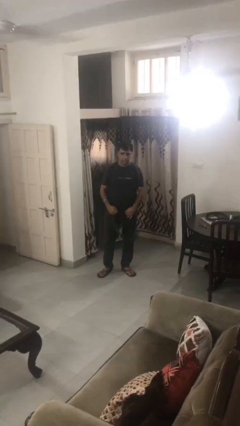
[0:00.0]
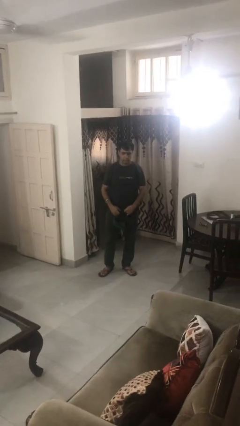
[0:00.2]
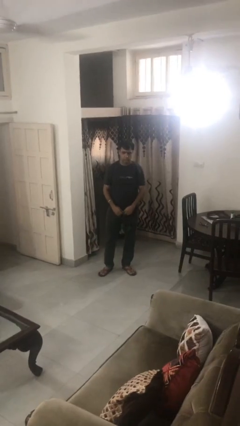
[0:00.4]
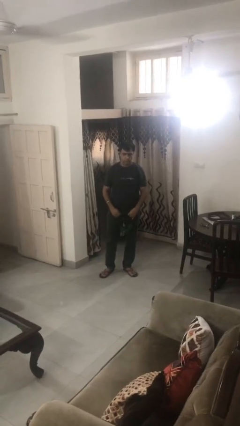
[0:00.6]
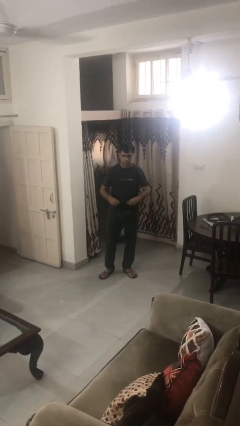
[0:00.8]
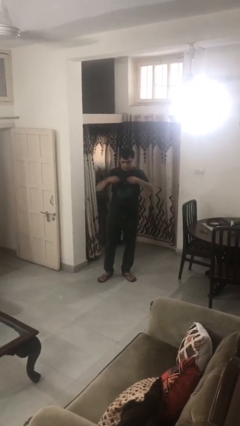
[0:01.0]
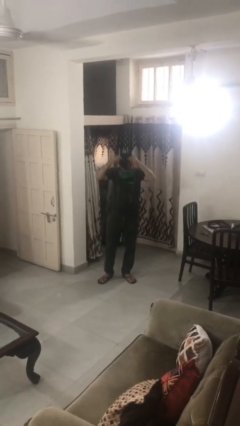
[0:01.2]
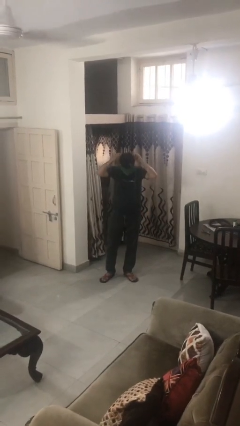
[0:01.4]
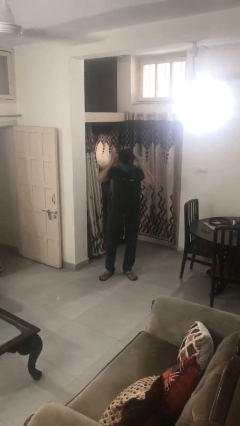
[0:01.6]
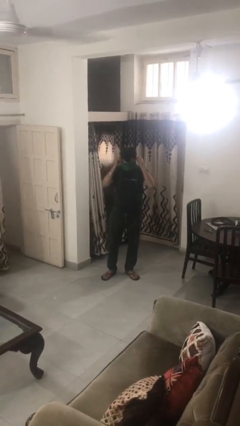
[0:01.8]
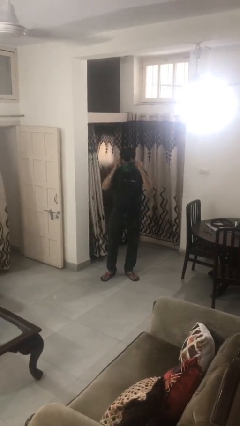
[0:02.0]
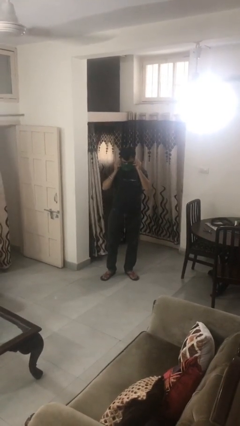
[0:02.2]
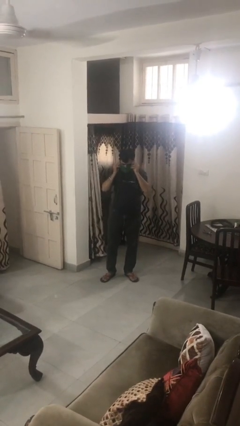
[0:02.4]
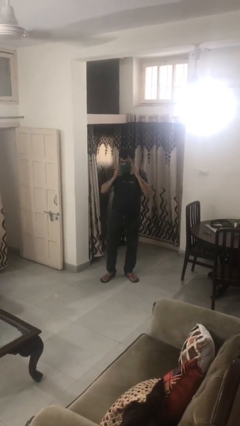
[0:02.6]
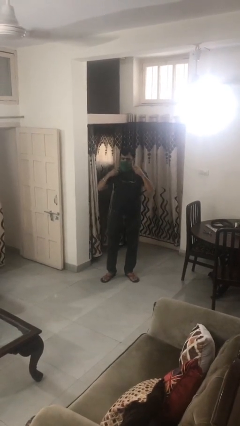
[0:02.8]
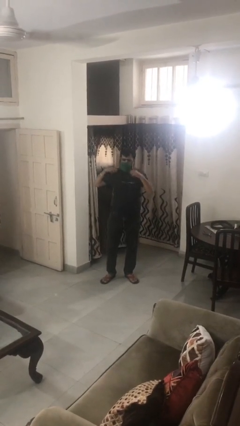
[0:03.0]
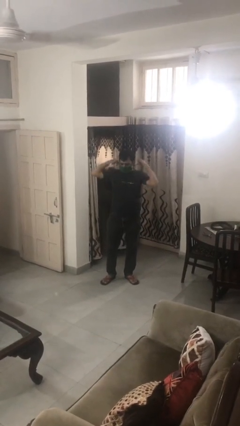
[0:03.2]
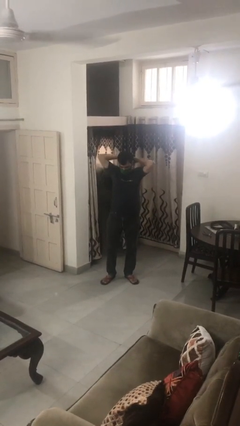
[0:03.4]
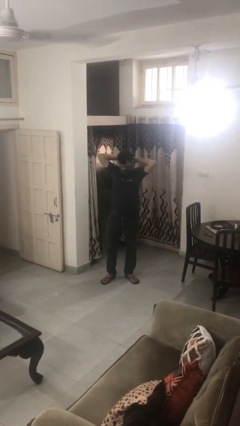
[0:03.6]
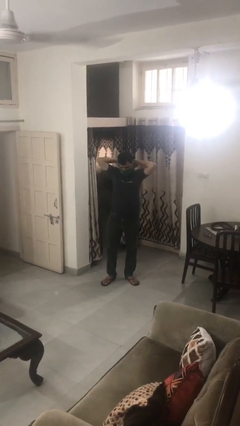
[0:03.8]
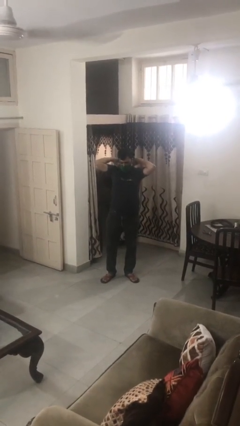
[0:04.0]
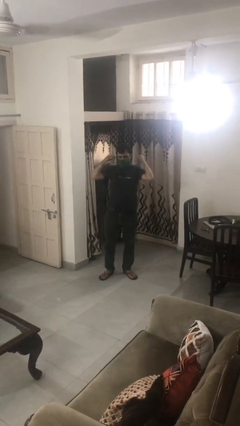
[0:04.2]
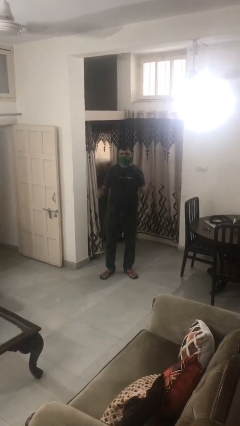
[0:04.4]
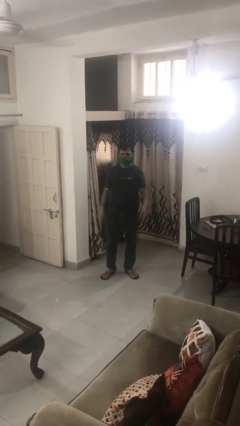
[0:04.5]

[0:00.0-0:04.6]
person puts on facemask

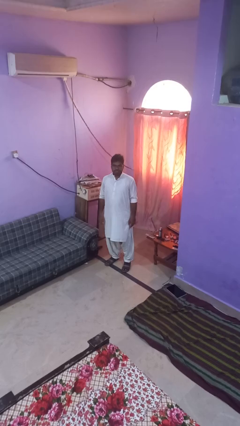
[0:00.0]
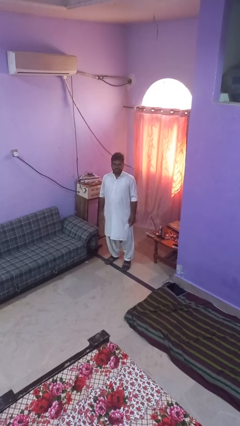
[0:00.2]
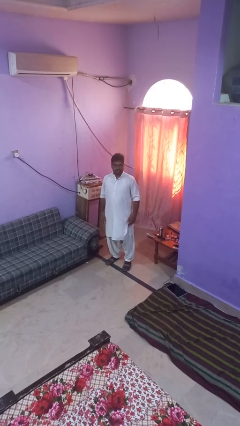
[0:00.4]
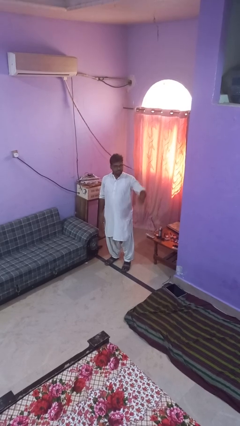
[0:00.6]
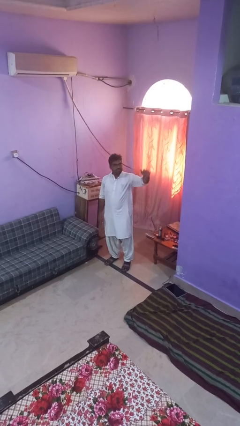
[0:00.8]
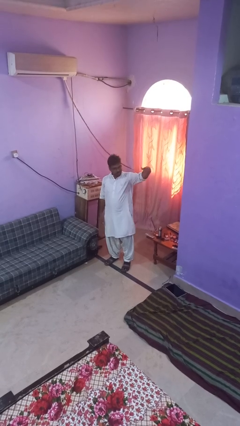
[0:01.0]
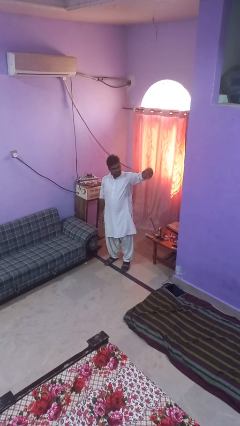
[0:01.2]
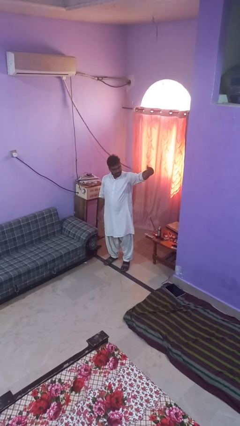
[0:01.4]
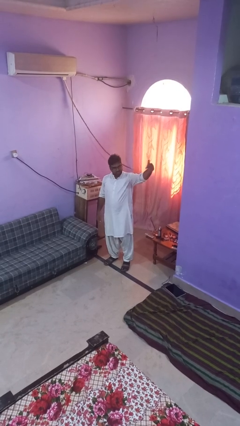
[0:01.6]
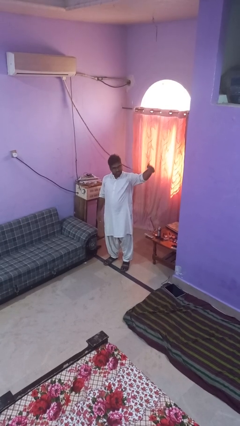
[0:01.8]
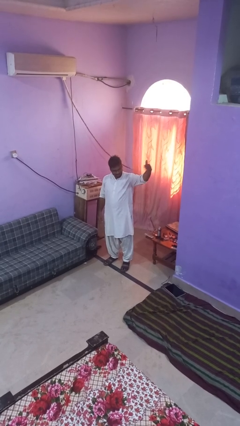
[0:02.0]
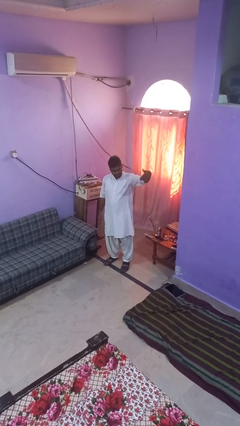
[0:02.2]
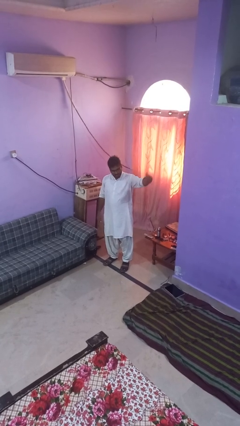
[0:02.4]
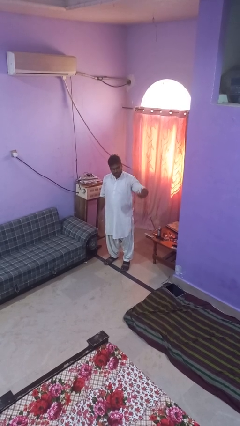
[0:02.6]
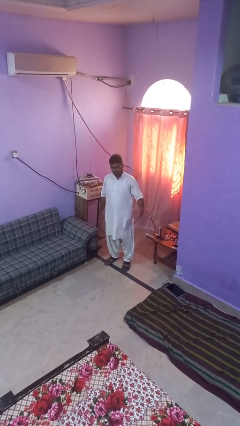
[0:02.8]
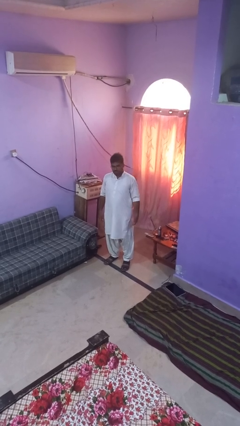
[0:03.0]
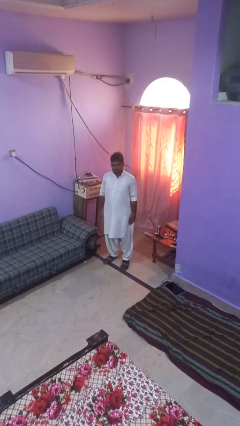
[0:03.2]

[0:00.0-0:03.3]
person gestures come here

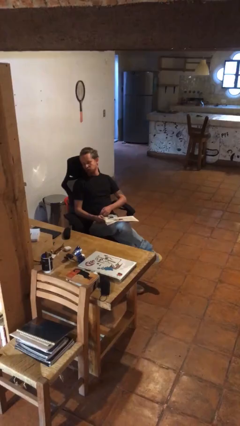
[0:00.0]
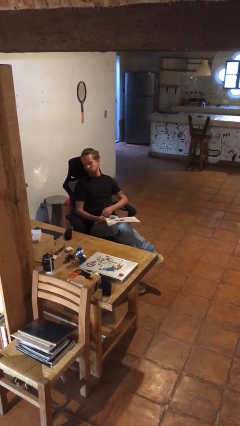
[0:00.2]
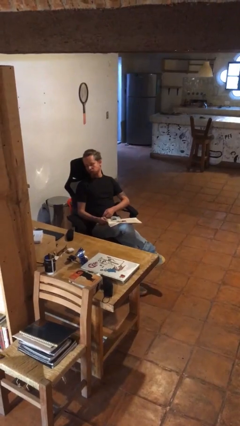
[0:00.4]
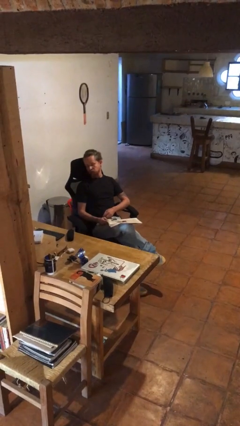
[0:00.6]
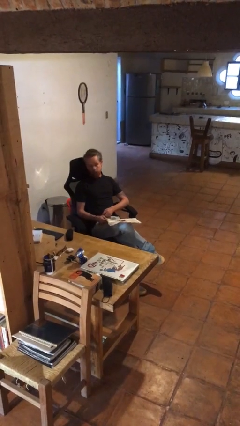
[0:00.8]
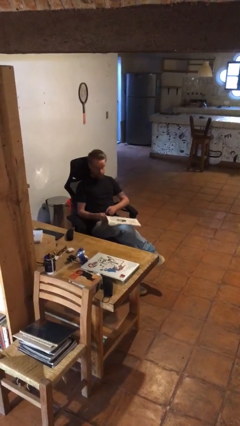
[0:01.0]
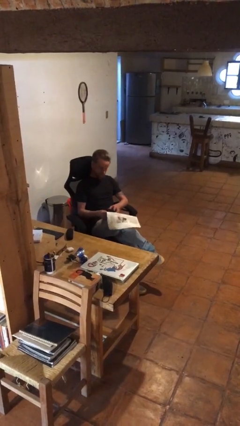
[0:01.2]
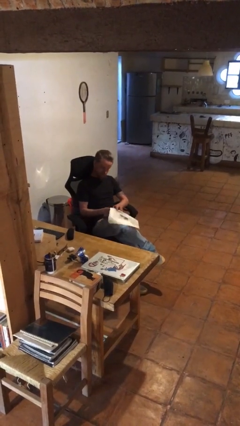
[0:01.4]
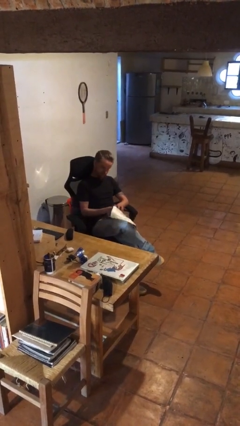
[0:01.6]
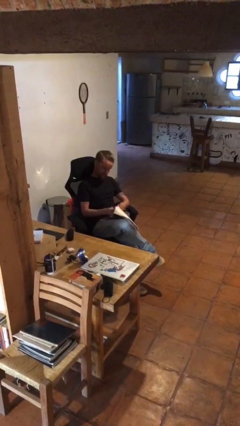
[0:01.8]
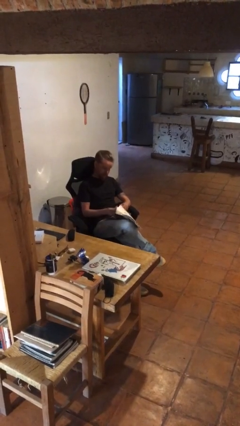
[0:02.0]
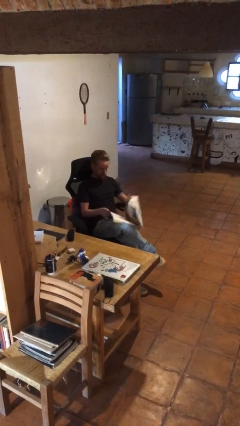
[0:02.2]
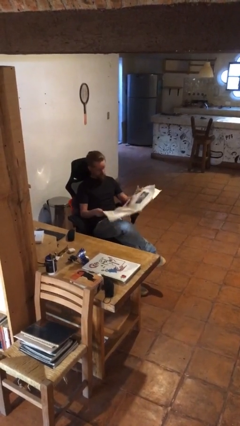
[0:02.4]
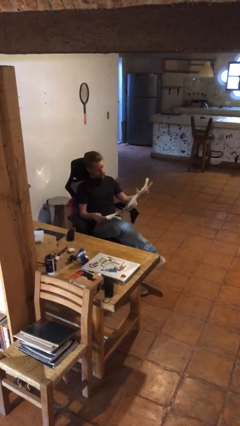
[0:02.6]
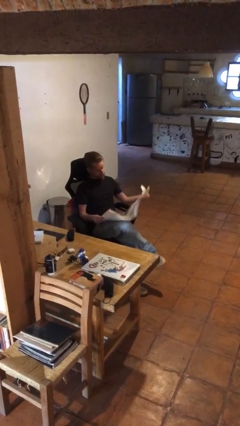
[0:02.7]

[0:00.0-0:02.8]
person reads newspaper

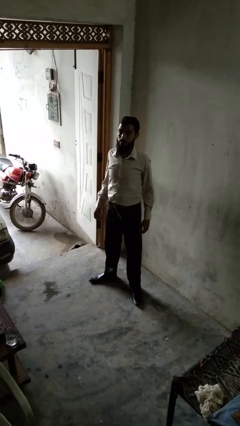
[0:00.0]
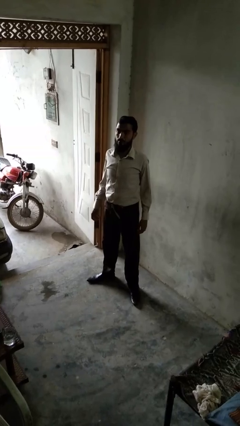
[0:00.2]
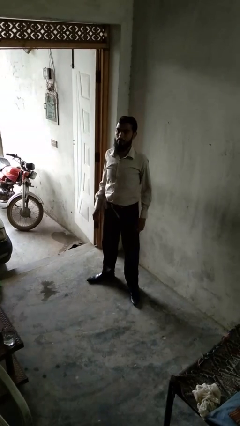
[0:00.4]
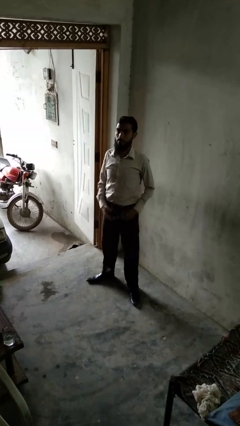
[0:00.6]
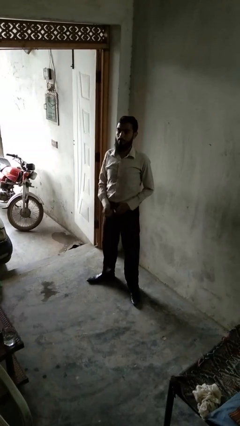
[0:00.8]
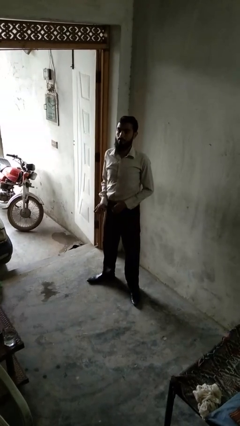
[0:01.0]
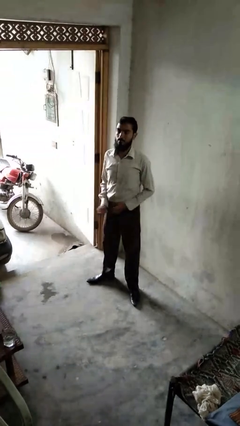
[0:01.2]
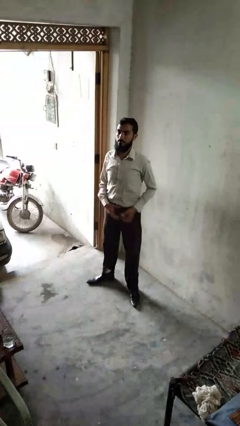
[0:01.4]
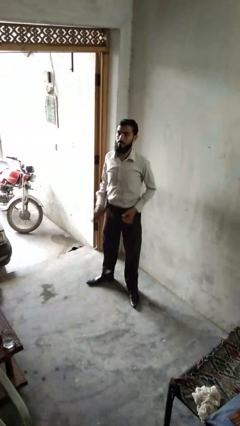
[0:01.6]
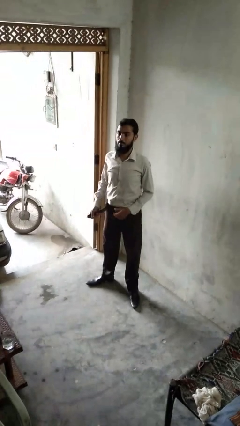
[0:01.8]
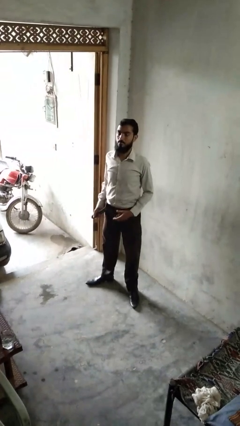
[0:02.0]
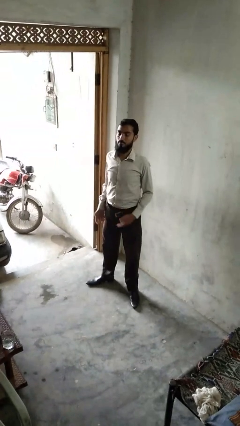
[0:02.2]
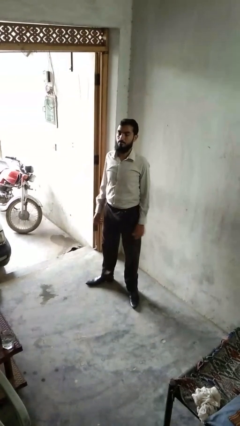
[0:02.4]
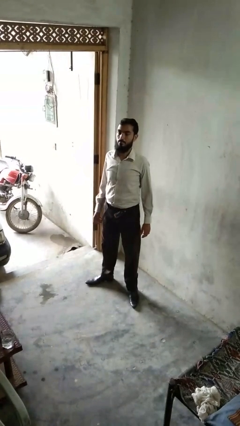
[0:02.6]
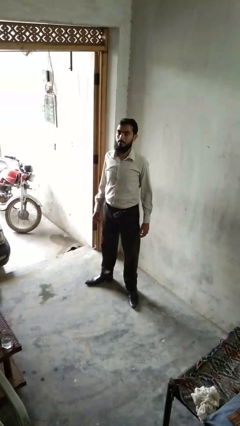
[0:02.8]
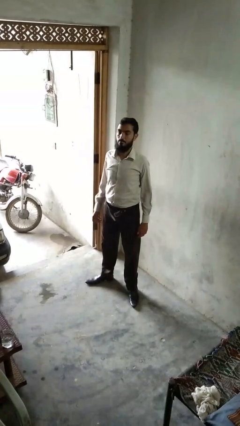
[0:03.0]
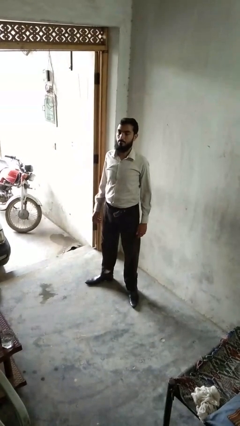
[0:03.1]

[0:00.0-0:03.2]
person takes off belt

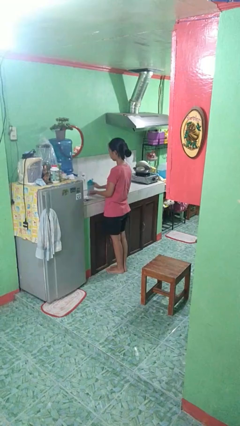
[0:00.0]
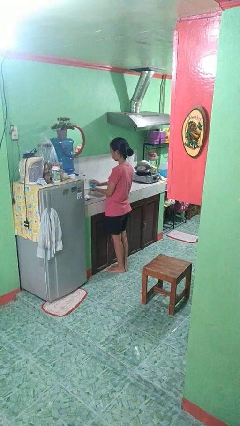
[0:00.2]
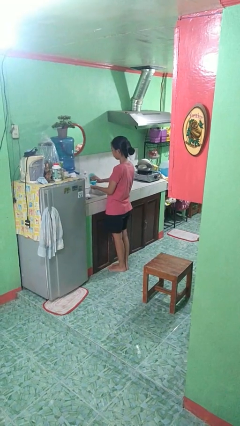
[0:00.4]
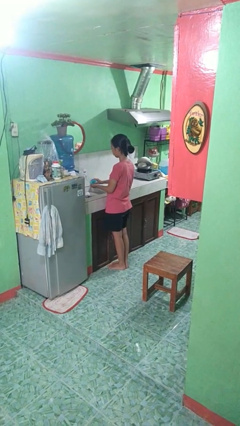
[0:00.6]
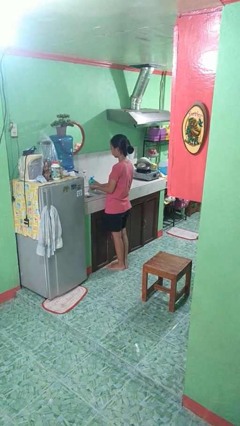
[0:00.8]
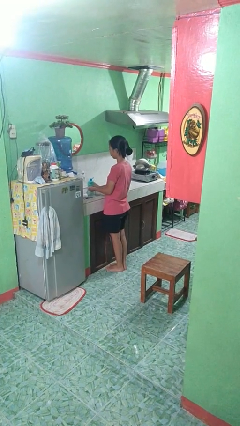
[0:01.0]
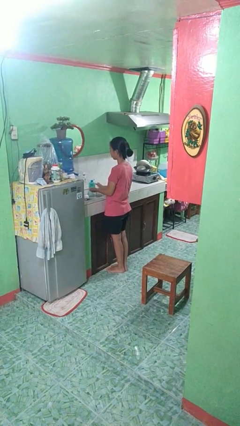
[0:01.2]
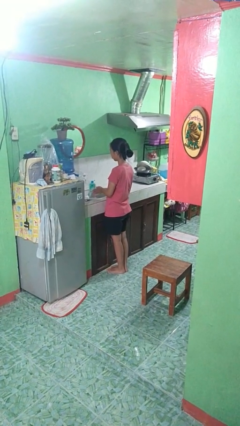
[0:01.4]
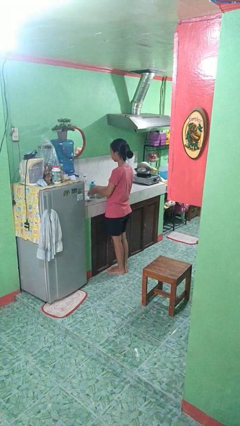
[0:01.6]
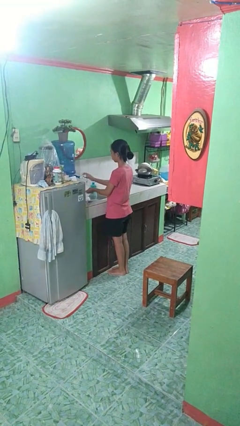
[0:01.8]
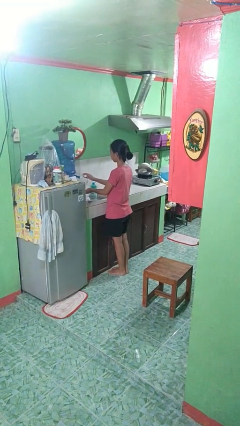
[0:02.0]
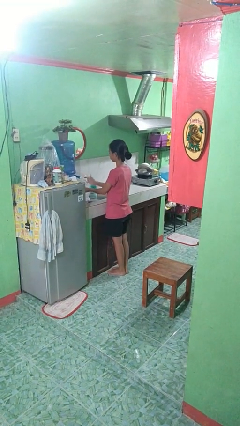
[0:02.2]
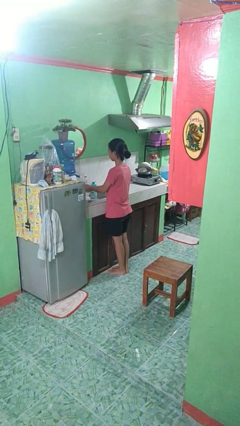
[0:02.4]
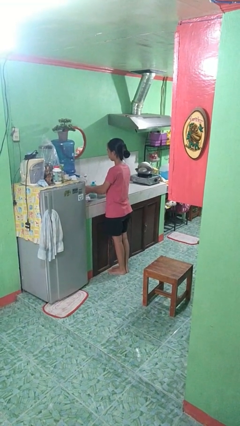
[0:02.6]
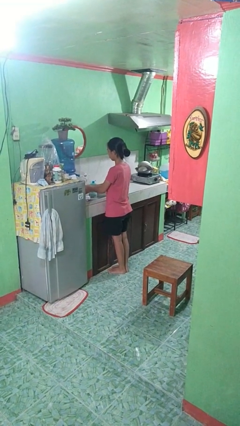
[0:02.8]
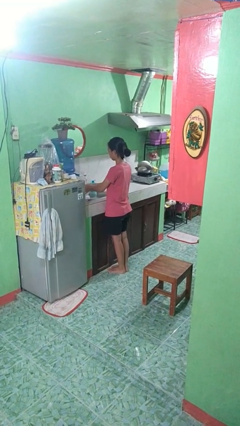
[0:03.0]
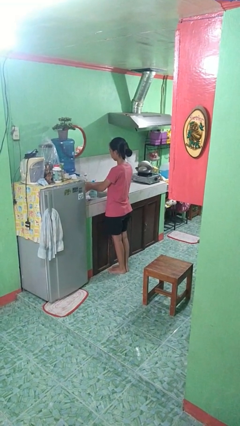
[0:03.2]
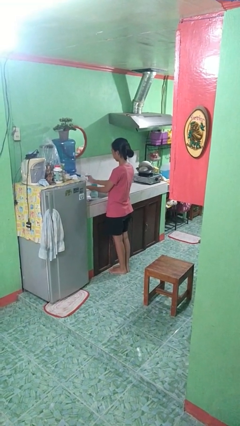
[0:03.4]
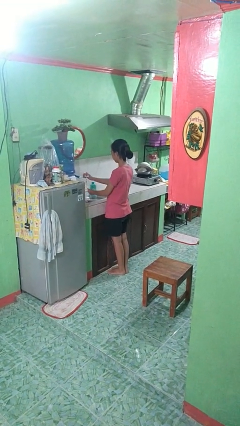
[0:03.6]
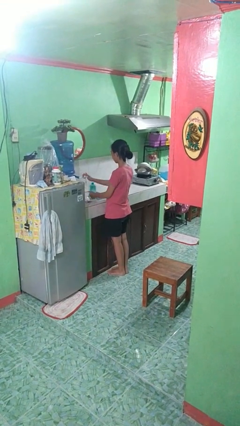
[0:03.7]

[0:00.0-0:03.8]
person washes hands
